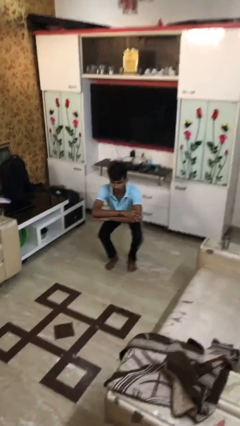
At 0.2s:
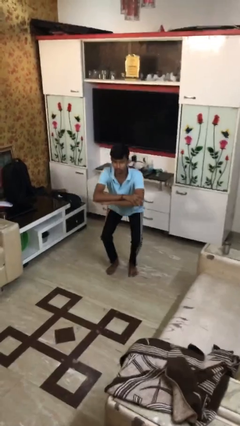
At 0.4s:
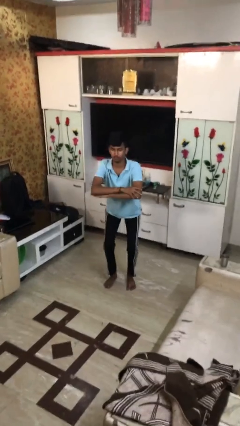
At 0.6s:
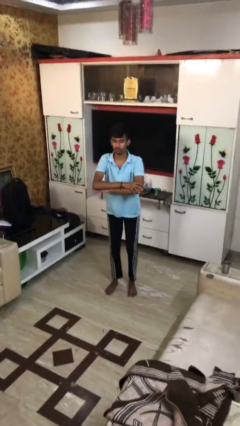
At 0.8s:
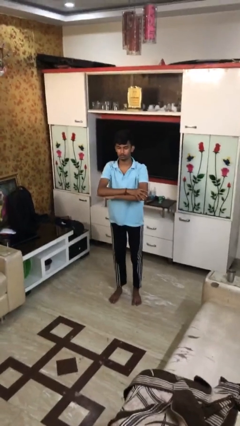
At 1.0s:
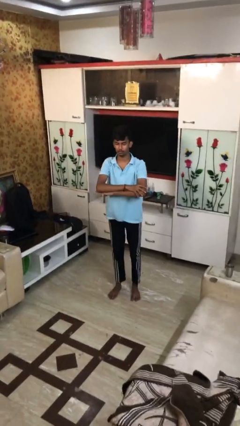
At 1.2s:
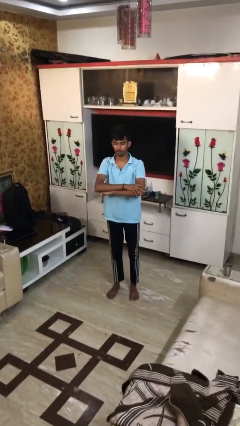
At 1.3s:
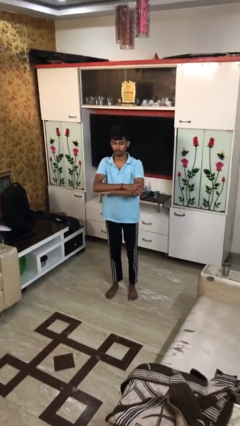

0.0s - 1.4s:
person stands up

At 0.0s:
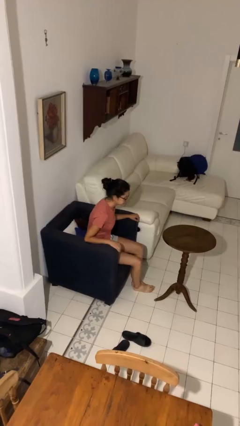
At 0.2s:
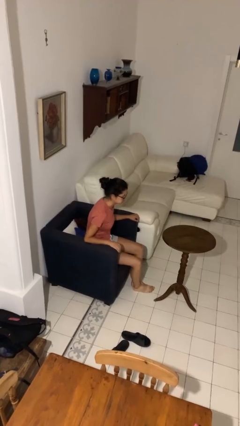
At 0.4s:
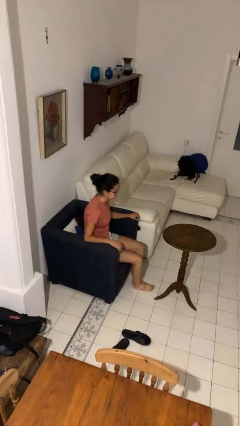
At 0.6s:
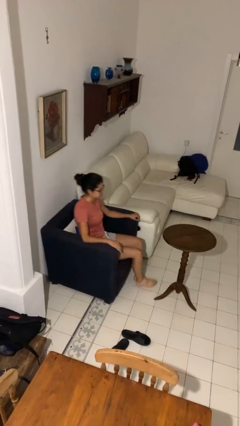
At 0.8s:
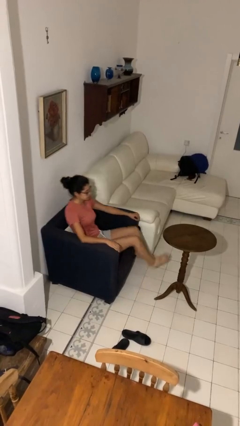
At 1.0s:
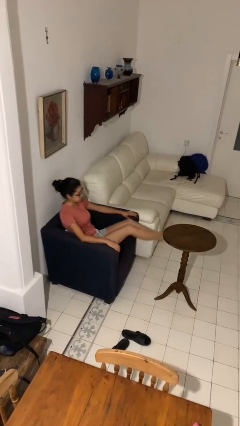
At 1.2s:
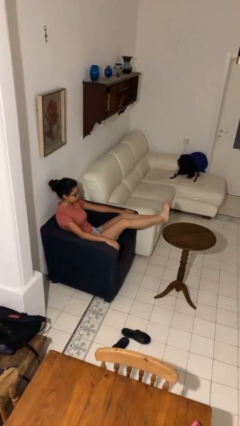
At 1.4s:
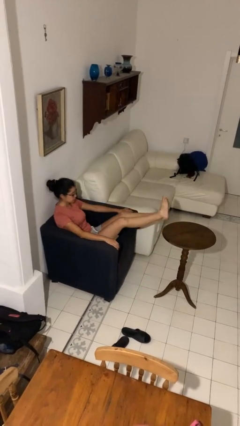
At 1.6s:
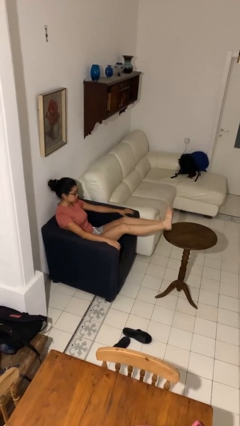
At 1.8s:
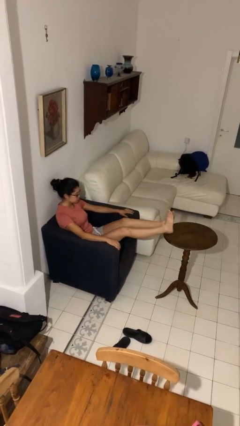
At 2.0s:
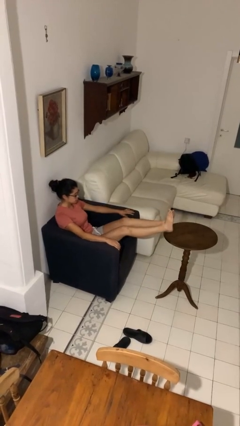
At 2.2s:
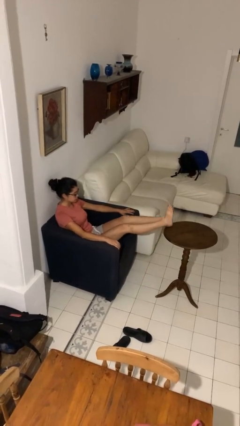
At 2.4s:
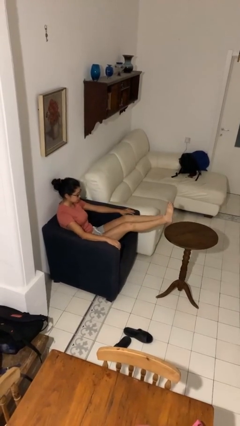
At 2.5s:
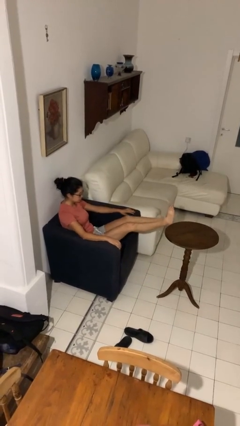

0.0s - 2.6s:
person puts feet up

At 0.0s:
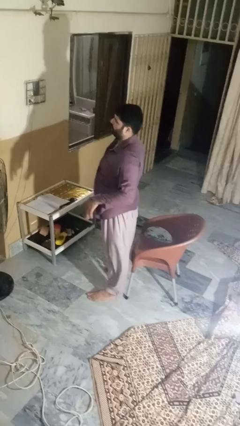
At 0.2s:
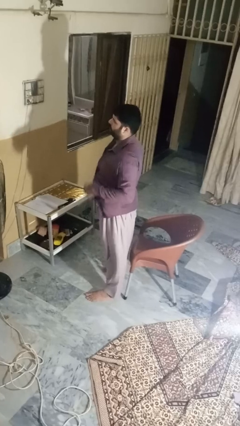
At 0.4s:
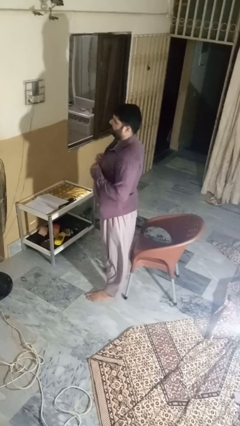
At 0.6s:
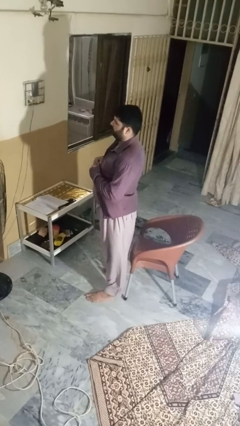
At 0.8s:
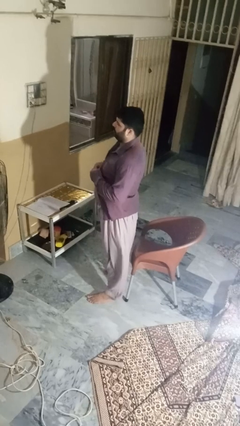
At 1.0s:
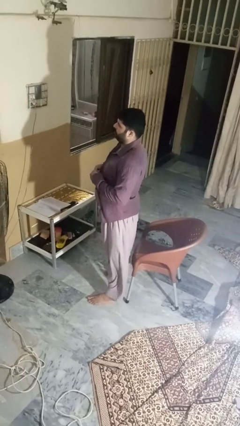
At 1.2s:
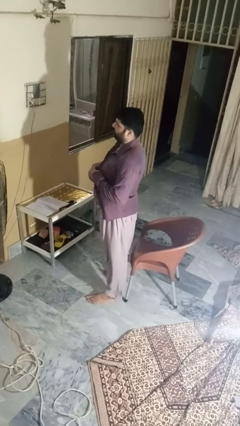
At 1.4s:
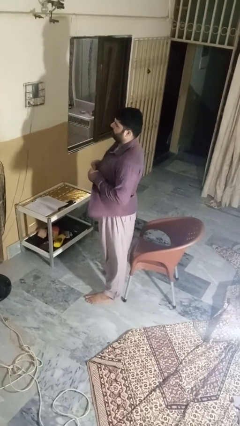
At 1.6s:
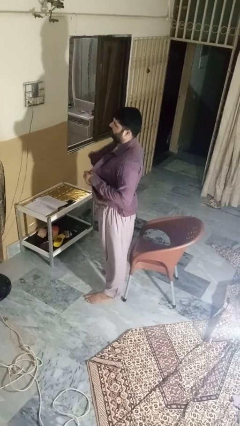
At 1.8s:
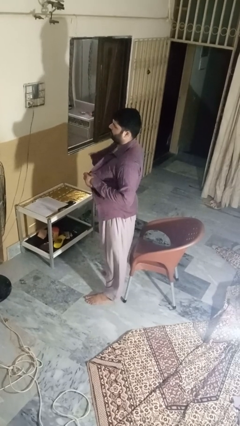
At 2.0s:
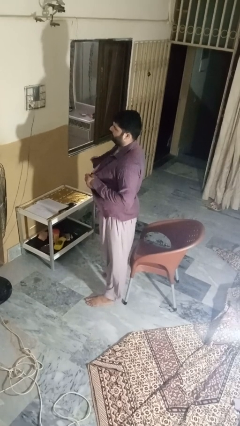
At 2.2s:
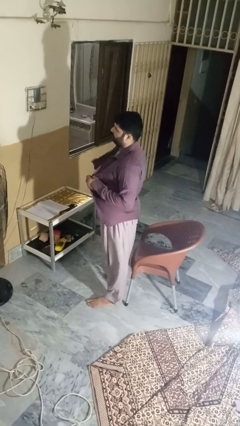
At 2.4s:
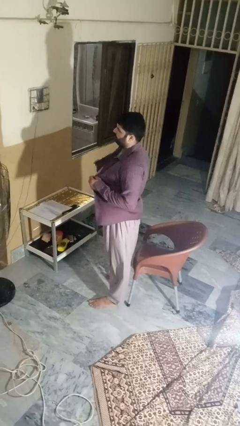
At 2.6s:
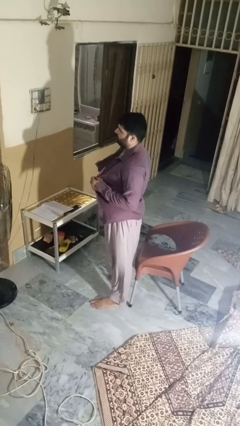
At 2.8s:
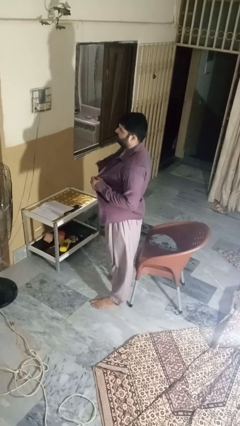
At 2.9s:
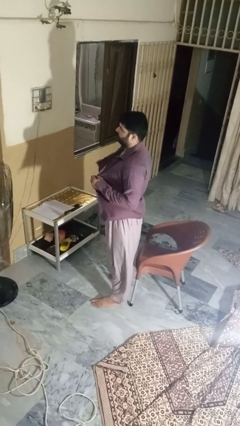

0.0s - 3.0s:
person unbuttons shirt

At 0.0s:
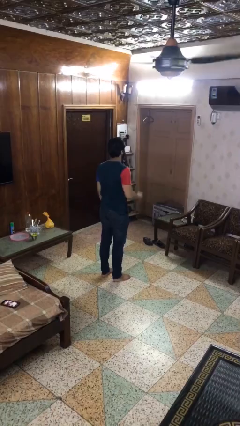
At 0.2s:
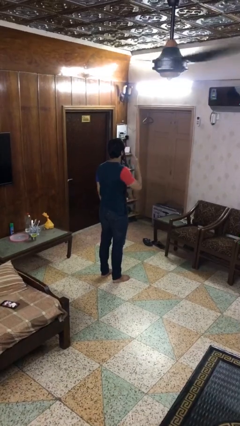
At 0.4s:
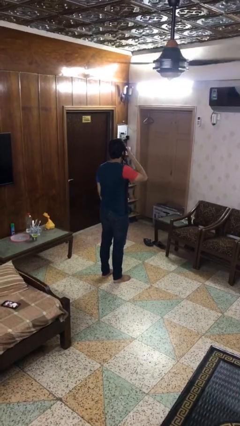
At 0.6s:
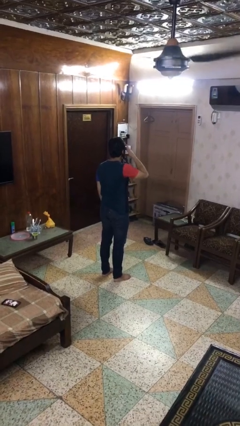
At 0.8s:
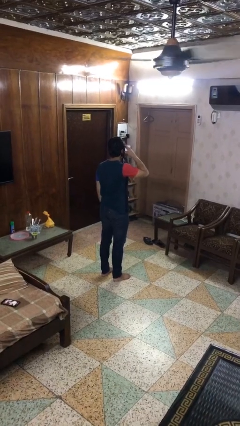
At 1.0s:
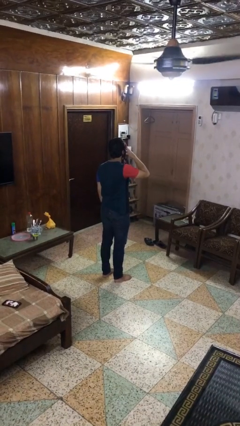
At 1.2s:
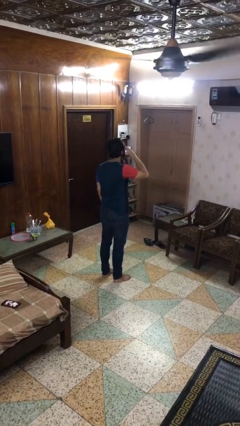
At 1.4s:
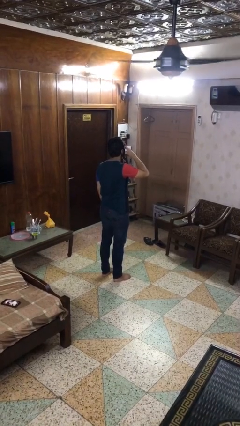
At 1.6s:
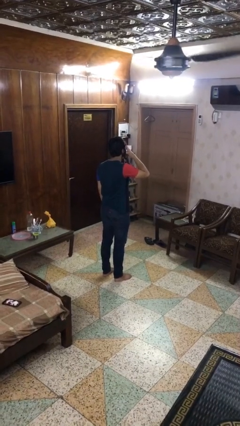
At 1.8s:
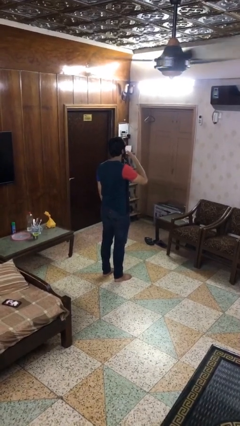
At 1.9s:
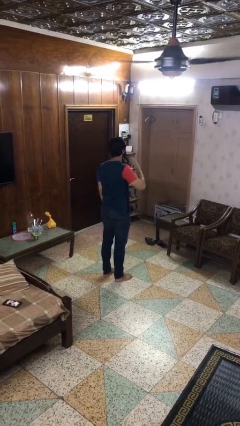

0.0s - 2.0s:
person rubs eyes

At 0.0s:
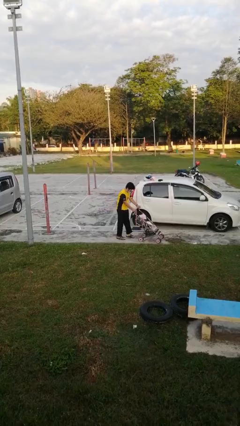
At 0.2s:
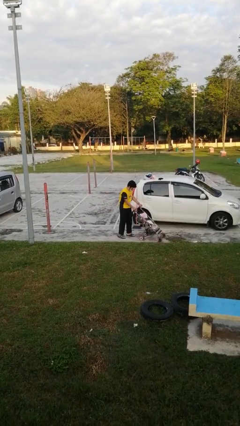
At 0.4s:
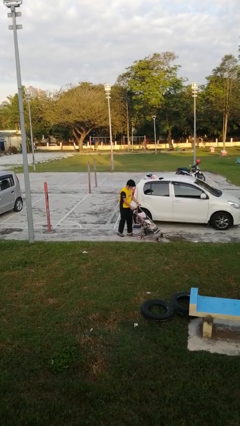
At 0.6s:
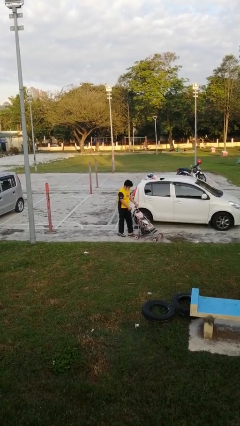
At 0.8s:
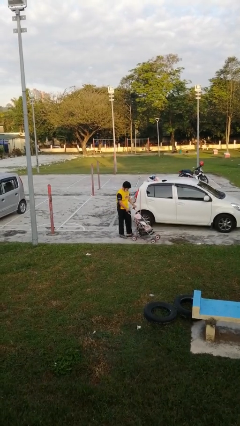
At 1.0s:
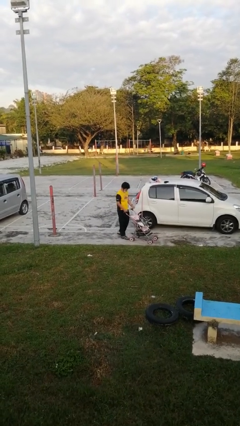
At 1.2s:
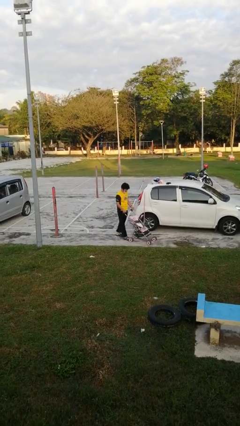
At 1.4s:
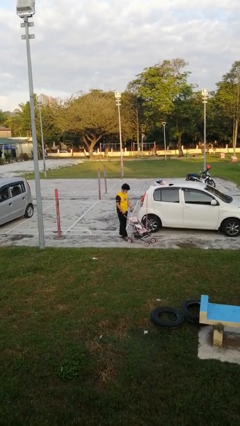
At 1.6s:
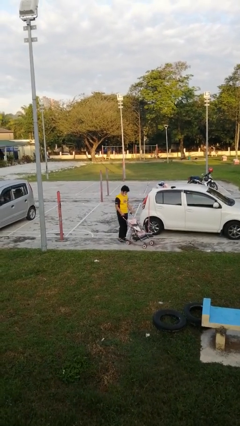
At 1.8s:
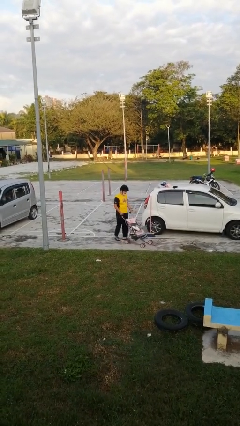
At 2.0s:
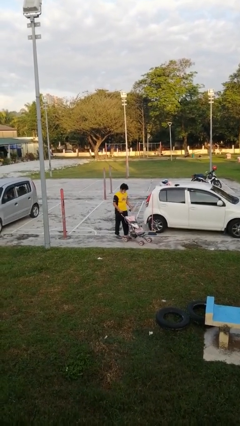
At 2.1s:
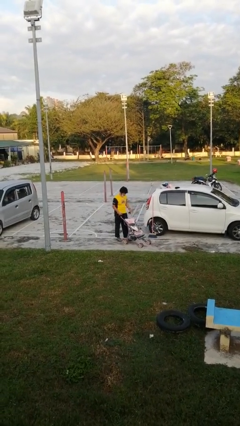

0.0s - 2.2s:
person pulls wheeled cart

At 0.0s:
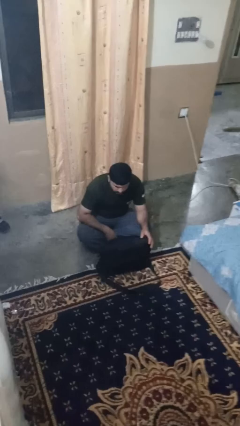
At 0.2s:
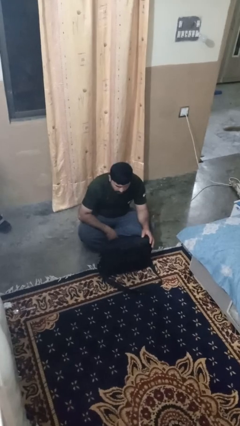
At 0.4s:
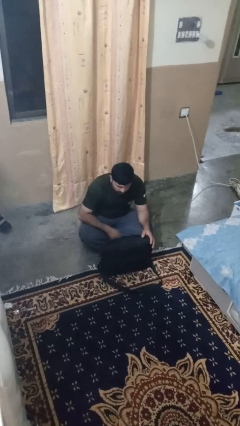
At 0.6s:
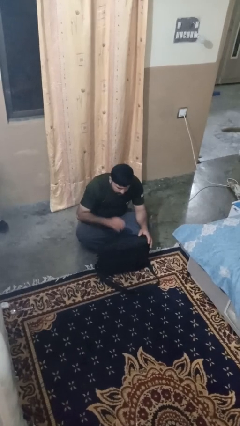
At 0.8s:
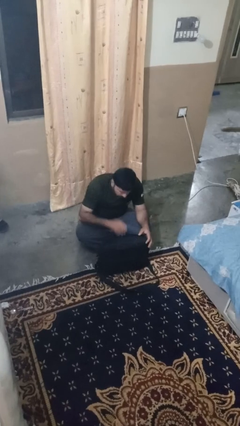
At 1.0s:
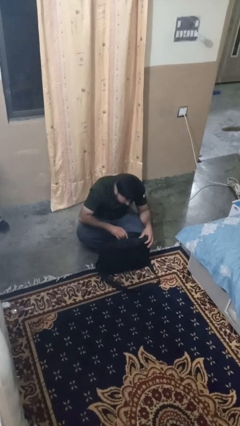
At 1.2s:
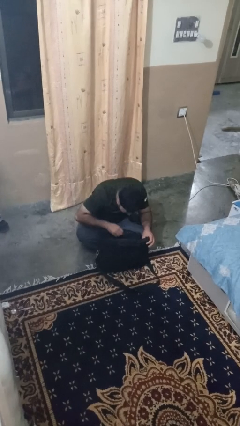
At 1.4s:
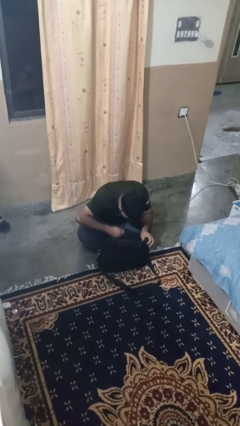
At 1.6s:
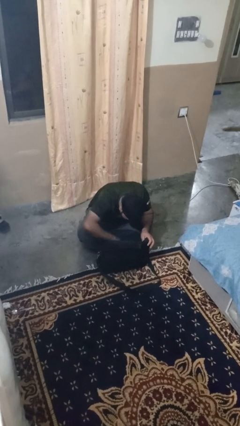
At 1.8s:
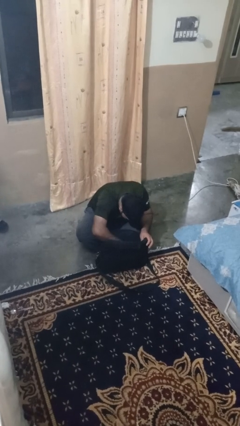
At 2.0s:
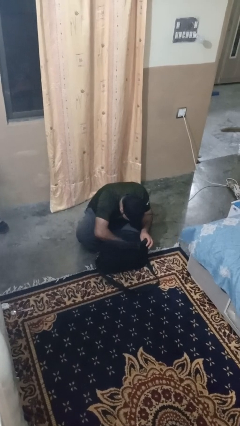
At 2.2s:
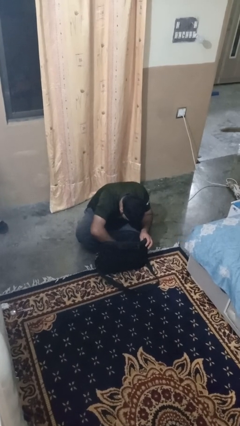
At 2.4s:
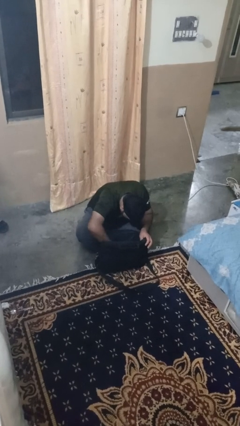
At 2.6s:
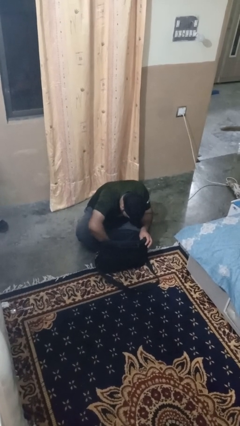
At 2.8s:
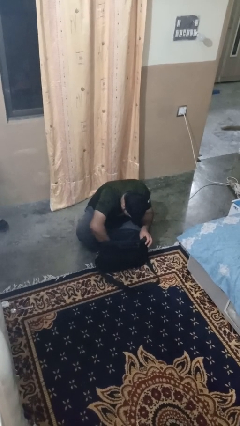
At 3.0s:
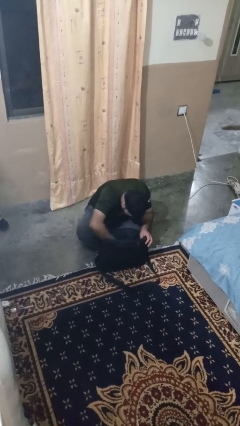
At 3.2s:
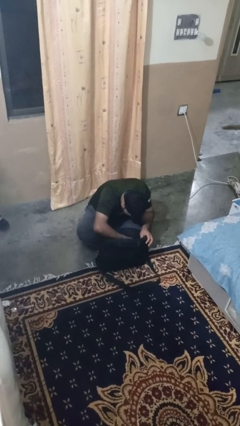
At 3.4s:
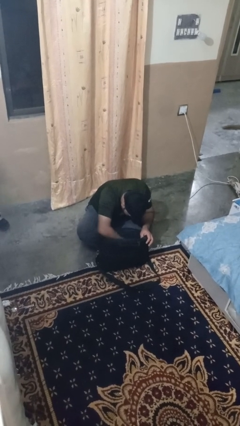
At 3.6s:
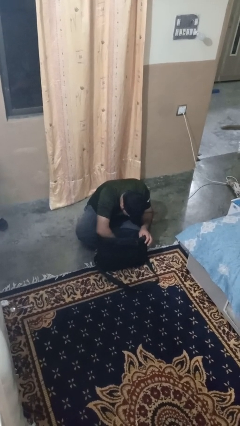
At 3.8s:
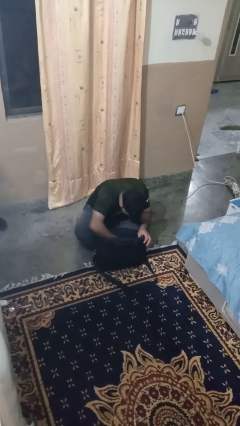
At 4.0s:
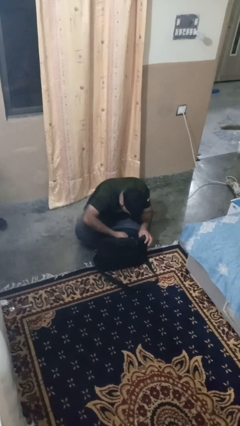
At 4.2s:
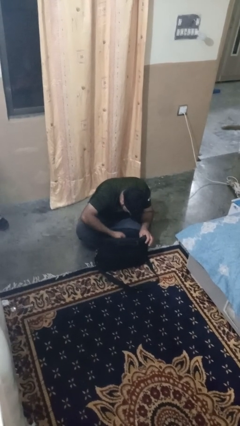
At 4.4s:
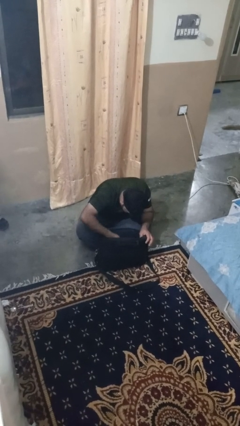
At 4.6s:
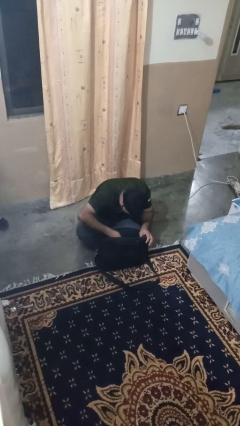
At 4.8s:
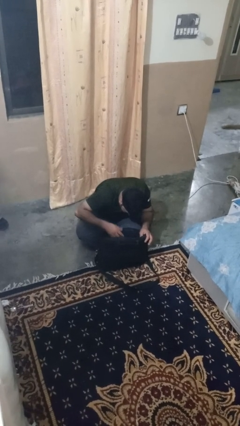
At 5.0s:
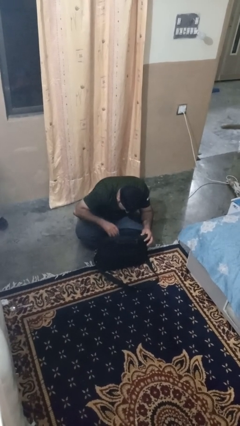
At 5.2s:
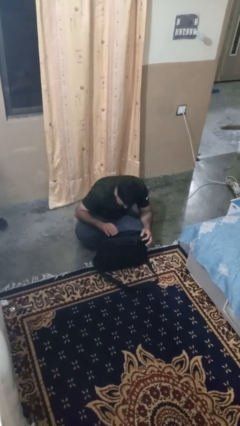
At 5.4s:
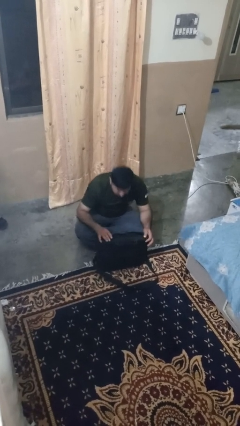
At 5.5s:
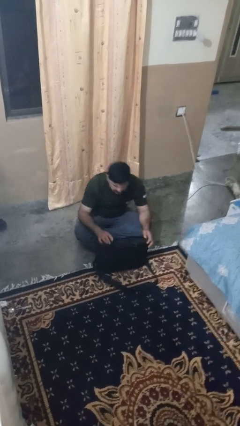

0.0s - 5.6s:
person searches in bag

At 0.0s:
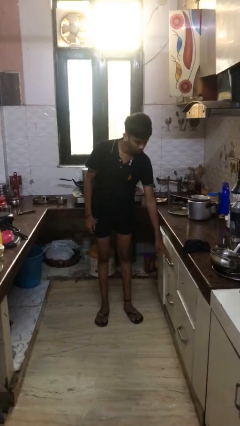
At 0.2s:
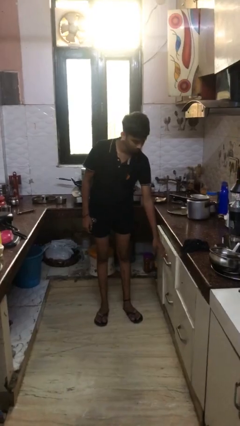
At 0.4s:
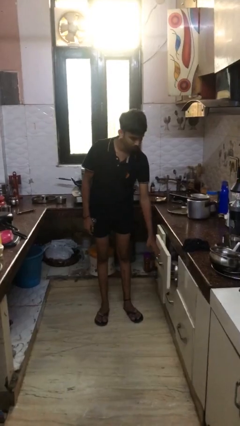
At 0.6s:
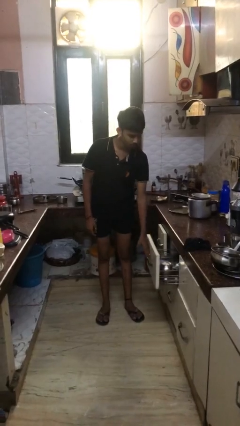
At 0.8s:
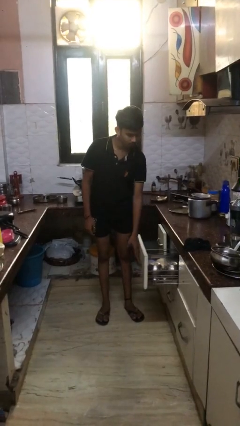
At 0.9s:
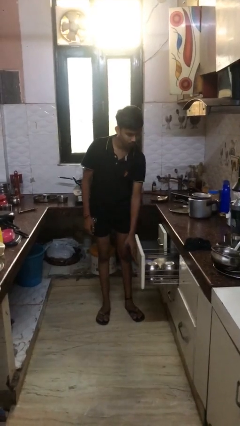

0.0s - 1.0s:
person opens kitchen drawer
